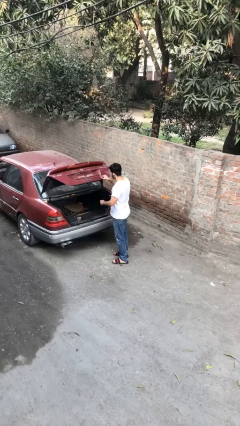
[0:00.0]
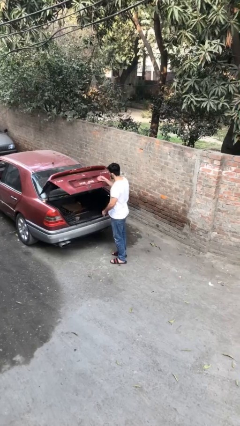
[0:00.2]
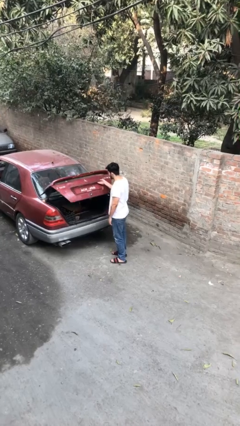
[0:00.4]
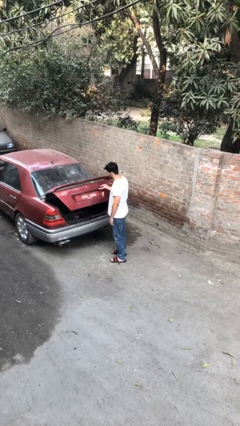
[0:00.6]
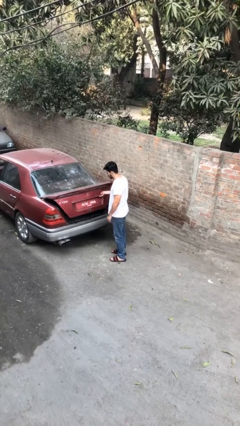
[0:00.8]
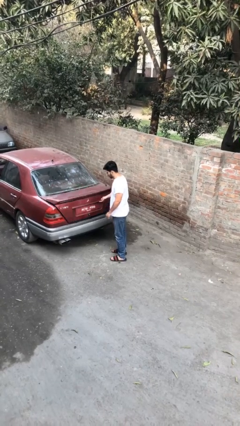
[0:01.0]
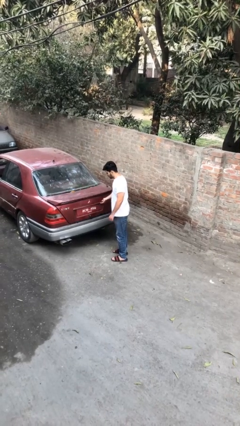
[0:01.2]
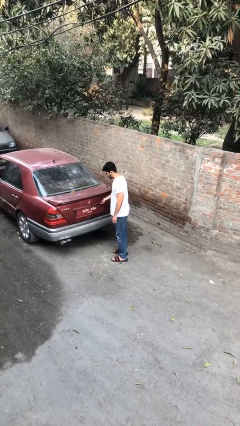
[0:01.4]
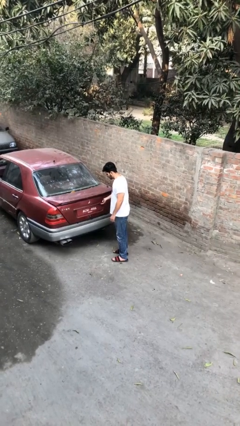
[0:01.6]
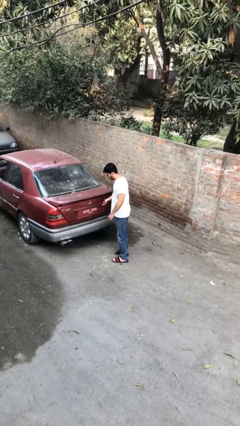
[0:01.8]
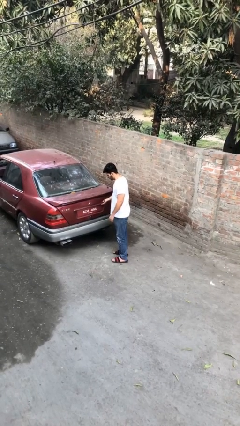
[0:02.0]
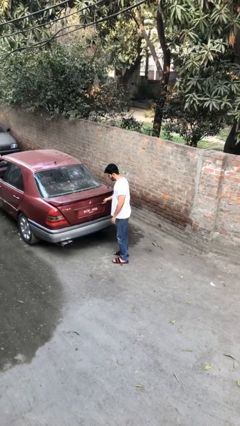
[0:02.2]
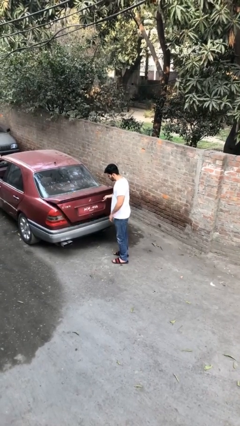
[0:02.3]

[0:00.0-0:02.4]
person closes car trunk

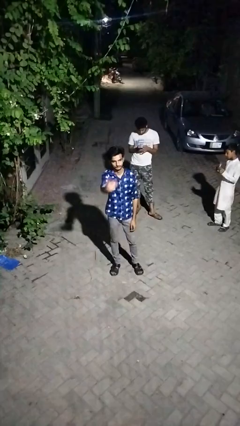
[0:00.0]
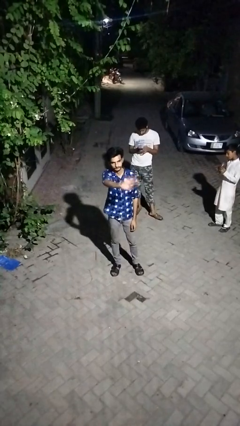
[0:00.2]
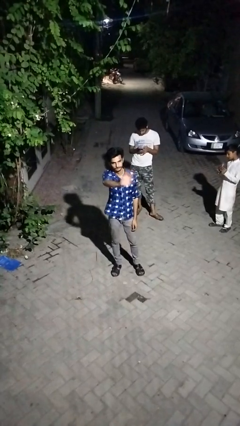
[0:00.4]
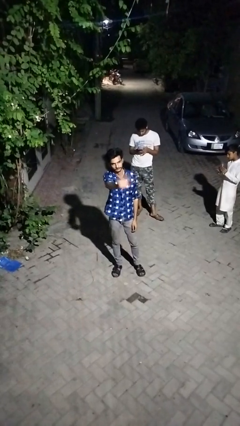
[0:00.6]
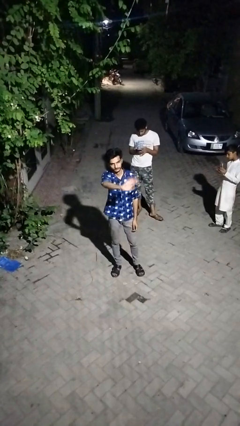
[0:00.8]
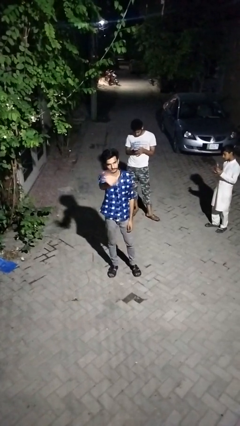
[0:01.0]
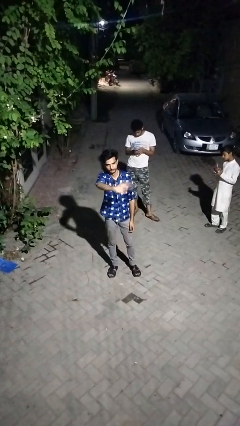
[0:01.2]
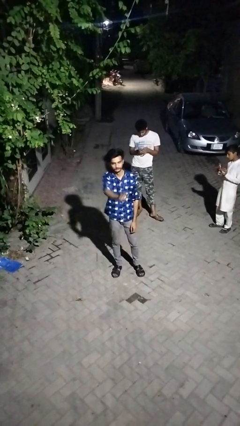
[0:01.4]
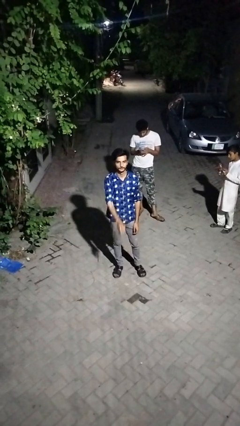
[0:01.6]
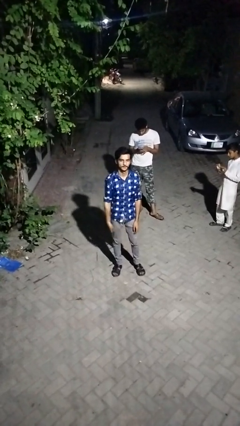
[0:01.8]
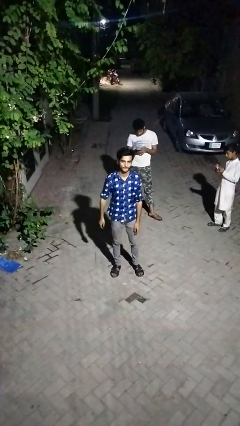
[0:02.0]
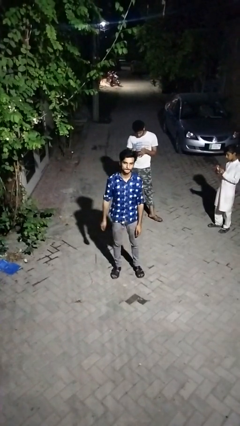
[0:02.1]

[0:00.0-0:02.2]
person waves at person

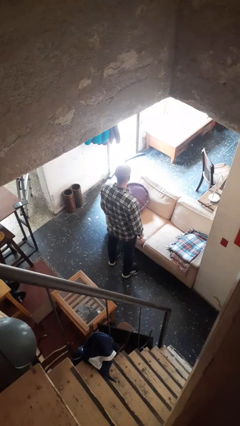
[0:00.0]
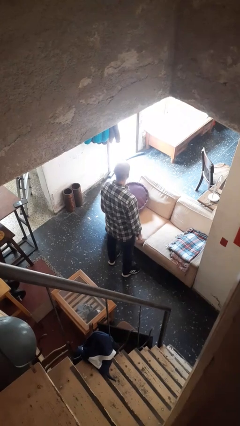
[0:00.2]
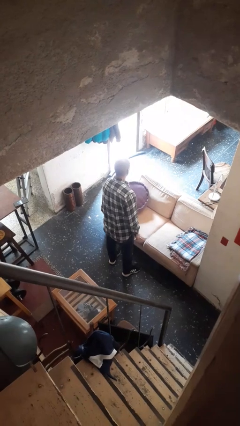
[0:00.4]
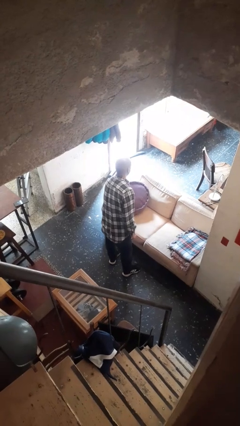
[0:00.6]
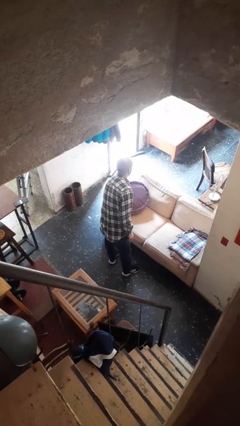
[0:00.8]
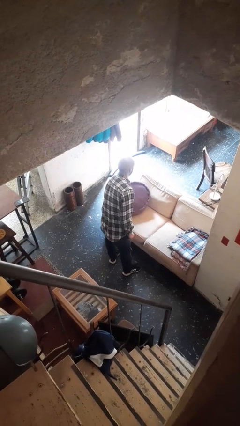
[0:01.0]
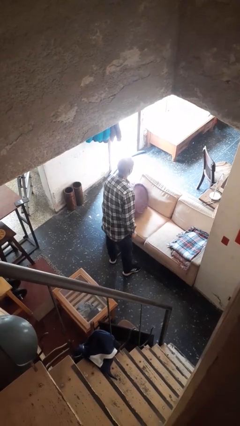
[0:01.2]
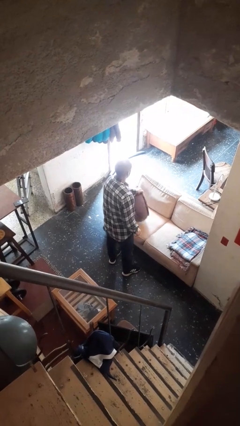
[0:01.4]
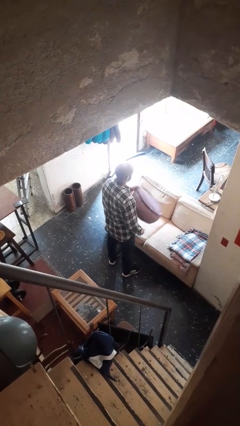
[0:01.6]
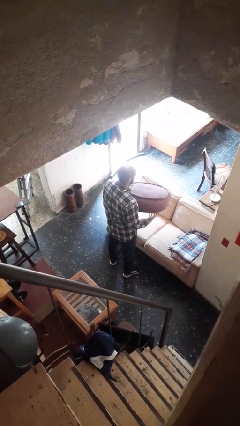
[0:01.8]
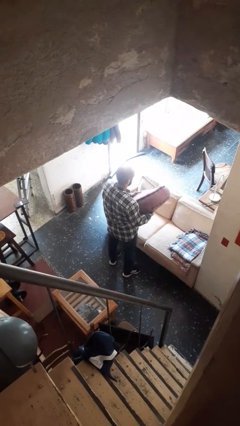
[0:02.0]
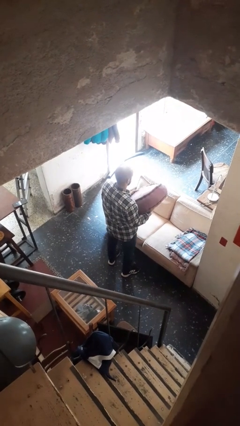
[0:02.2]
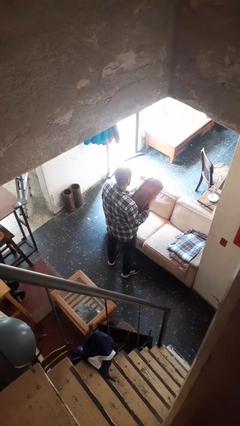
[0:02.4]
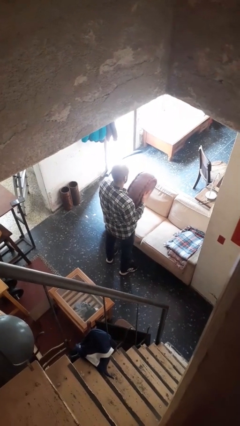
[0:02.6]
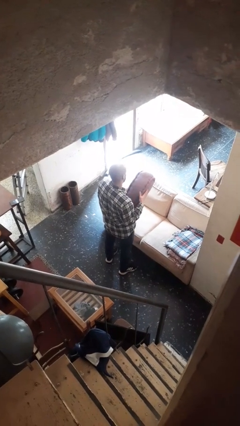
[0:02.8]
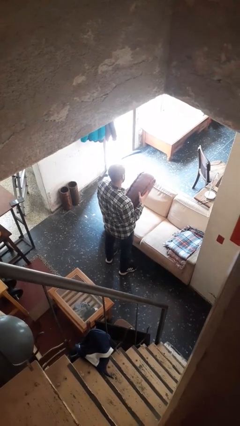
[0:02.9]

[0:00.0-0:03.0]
person picks up object from couch

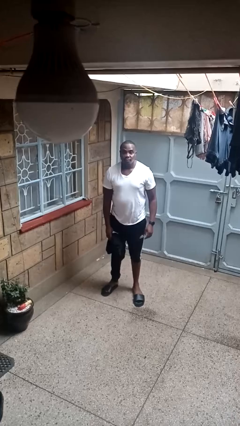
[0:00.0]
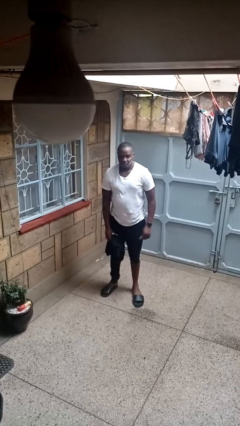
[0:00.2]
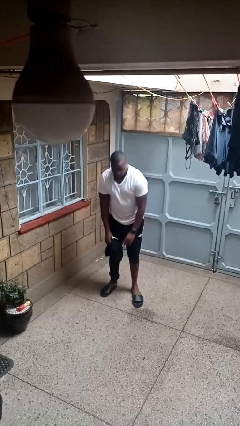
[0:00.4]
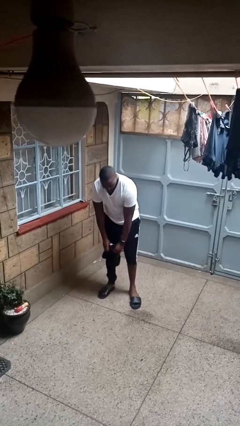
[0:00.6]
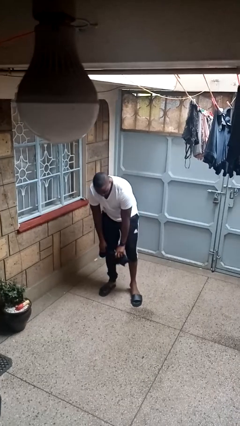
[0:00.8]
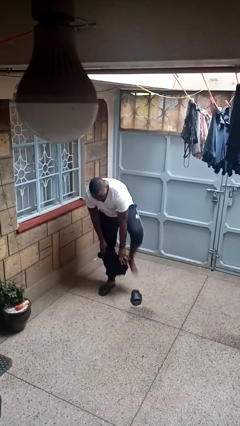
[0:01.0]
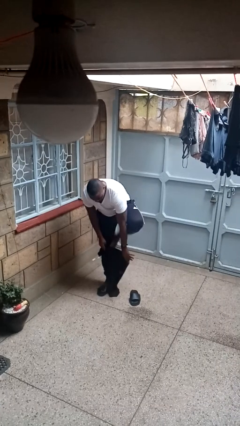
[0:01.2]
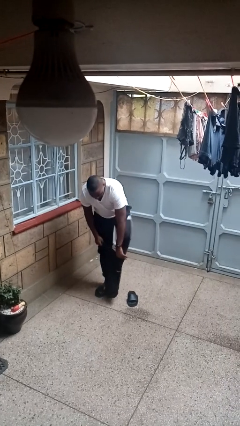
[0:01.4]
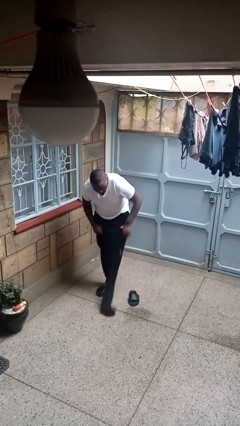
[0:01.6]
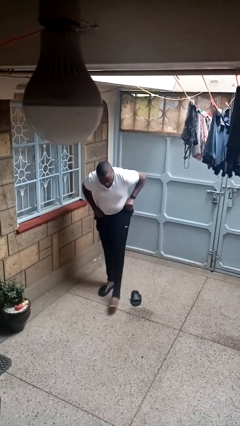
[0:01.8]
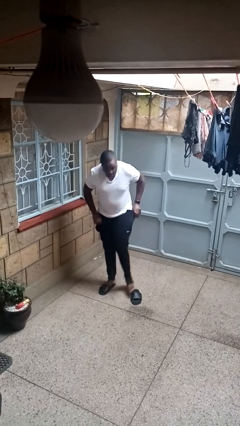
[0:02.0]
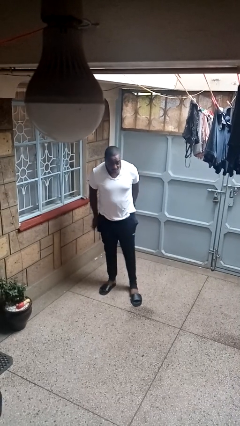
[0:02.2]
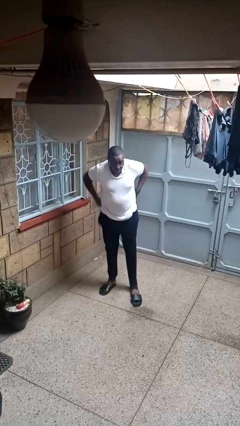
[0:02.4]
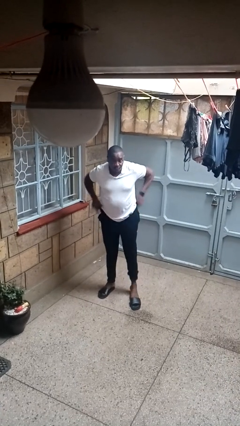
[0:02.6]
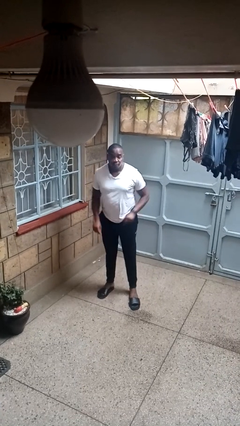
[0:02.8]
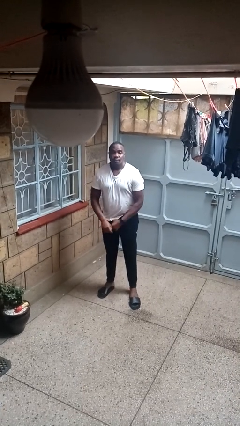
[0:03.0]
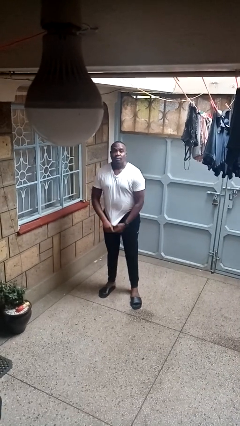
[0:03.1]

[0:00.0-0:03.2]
person puts on pants

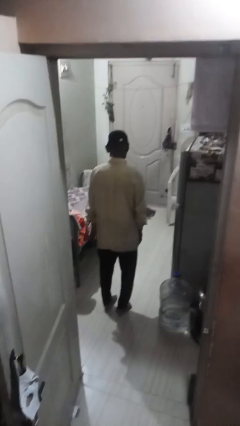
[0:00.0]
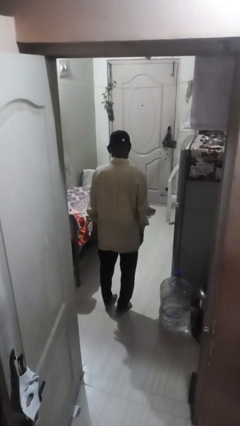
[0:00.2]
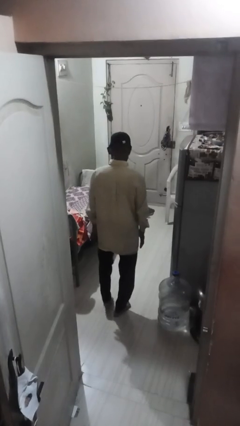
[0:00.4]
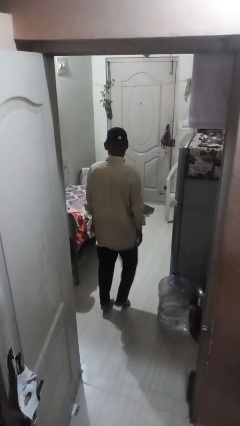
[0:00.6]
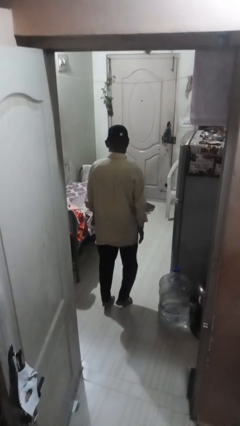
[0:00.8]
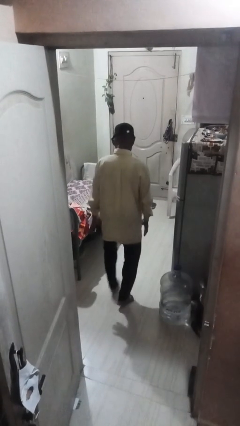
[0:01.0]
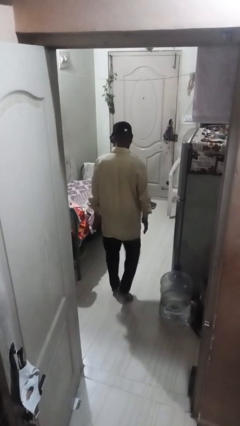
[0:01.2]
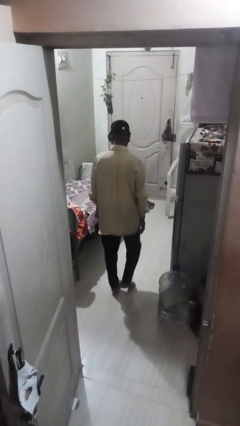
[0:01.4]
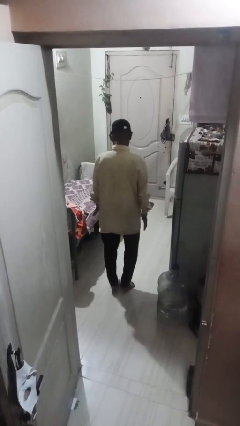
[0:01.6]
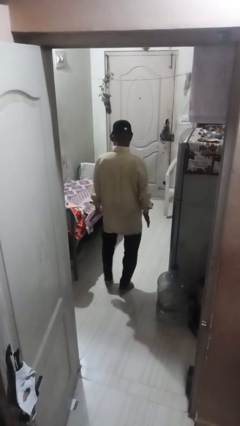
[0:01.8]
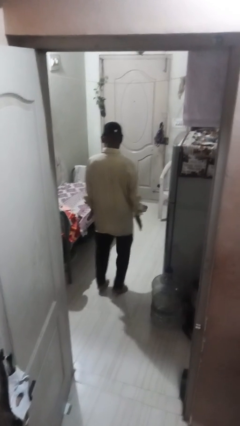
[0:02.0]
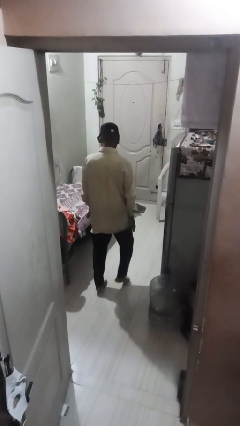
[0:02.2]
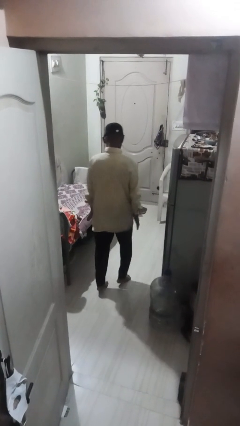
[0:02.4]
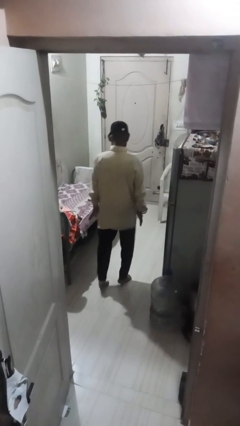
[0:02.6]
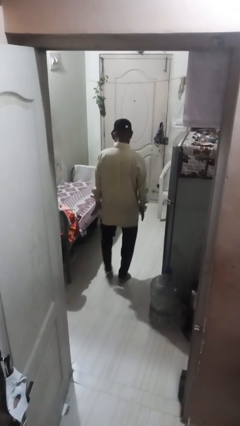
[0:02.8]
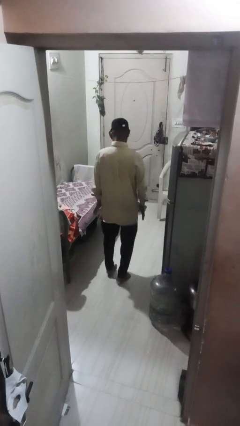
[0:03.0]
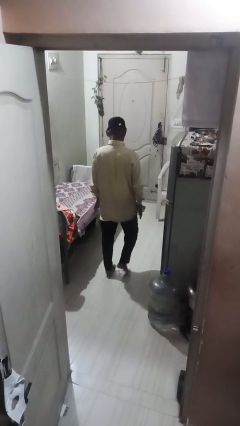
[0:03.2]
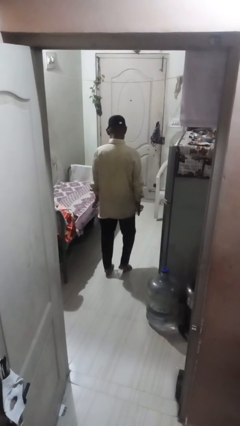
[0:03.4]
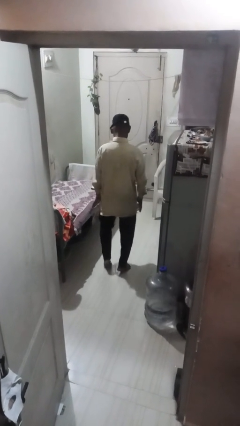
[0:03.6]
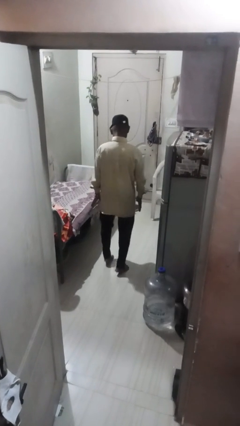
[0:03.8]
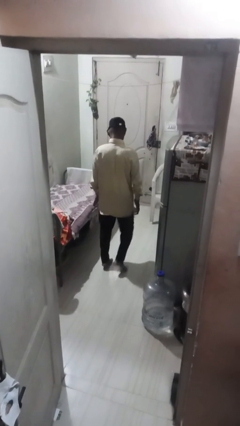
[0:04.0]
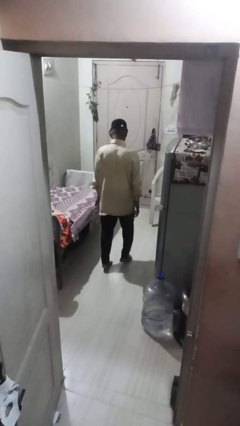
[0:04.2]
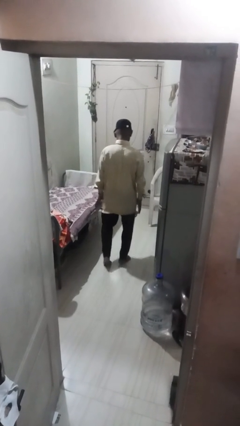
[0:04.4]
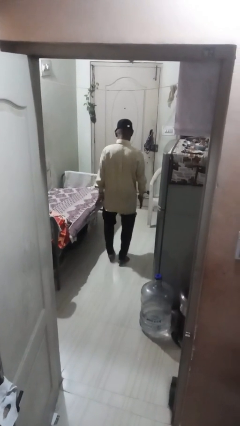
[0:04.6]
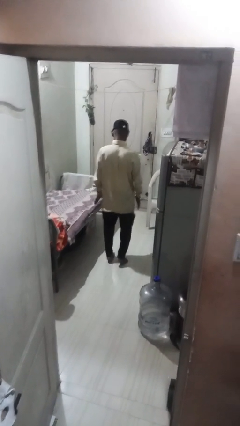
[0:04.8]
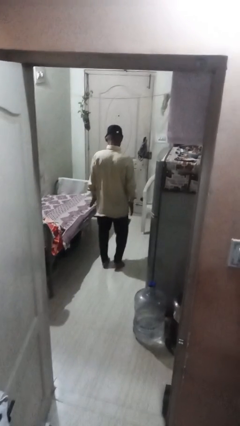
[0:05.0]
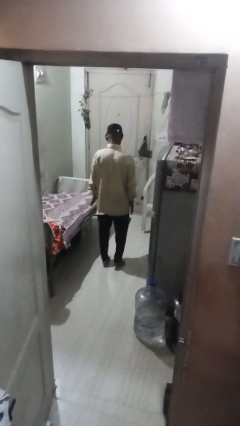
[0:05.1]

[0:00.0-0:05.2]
person walks tiptoe

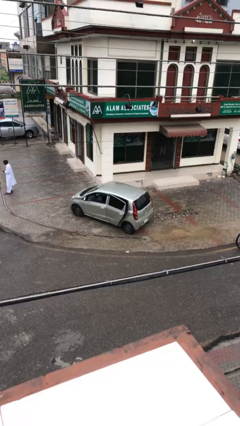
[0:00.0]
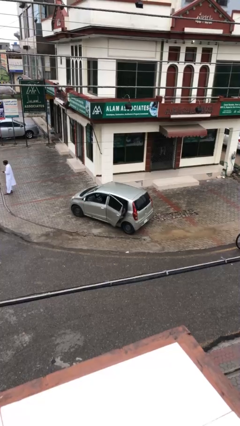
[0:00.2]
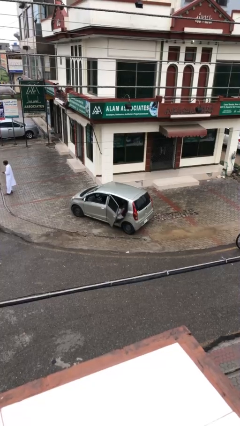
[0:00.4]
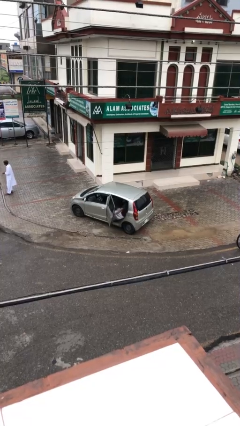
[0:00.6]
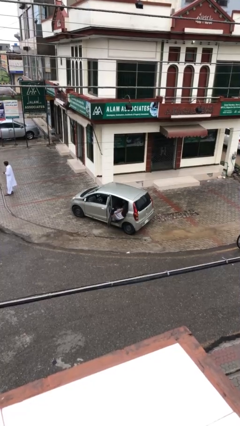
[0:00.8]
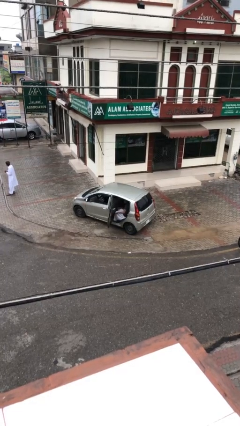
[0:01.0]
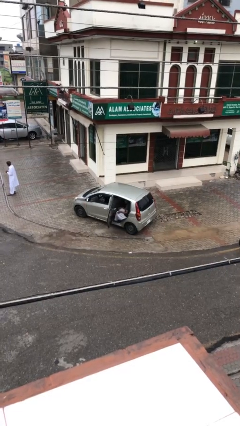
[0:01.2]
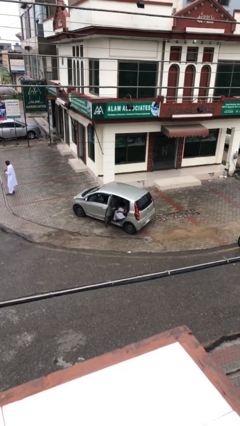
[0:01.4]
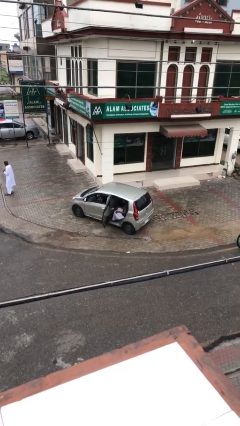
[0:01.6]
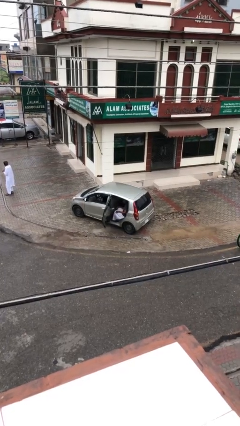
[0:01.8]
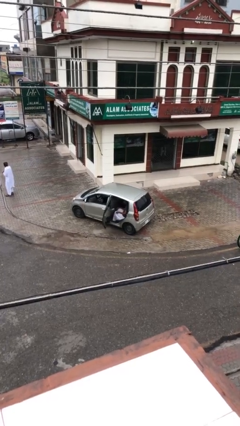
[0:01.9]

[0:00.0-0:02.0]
person opens car door
